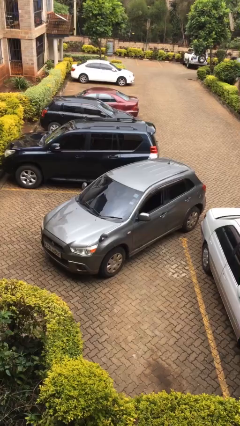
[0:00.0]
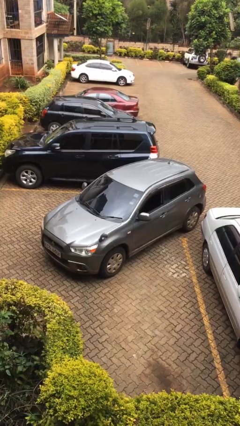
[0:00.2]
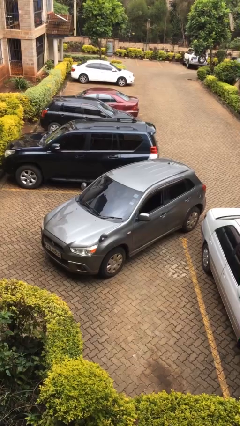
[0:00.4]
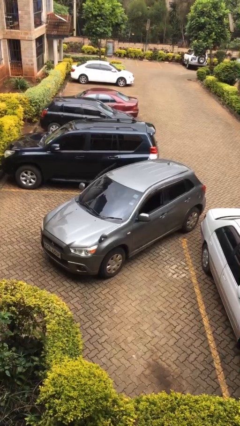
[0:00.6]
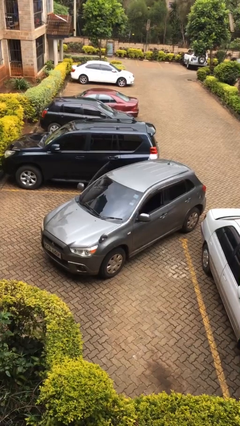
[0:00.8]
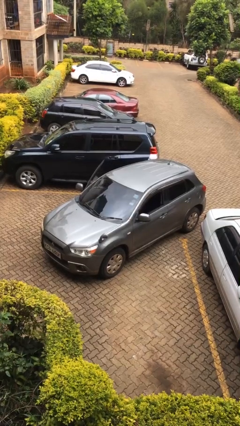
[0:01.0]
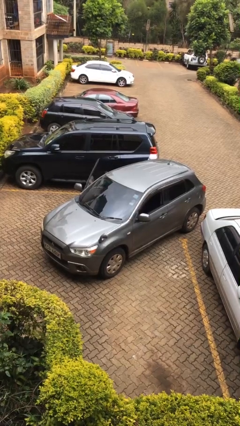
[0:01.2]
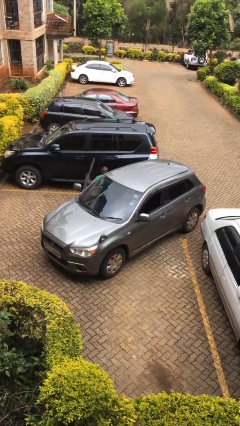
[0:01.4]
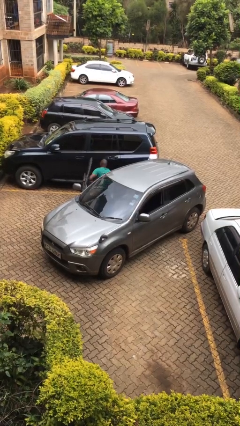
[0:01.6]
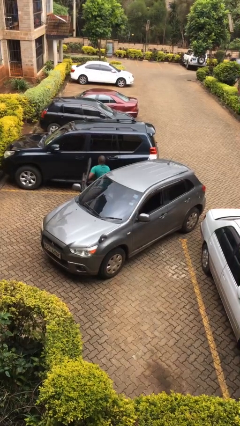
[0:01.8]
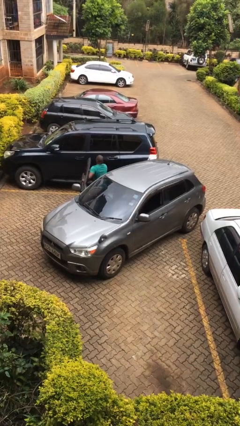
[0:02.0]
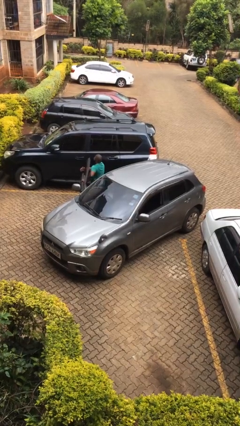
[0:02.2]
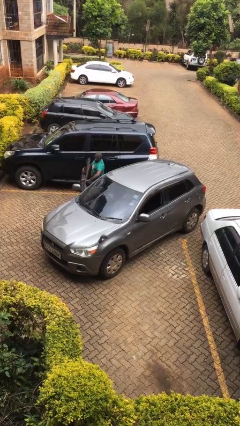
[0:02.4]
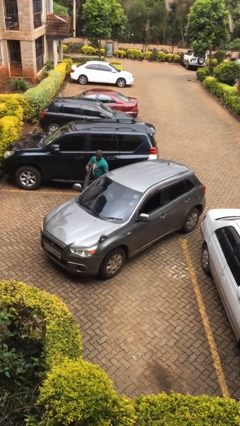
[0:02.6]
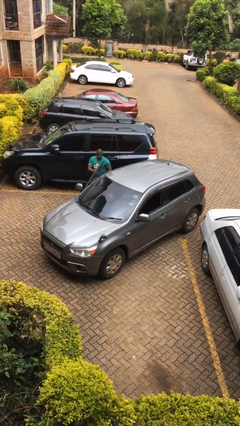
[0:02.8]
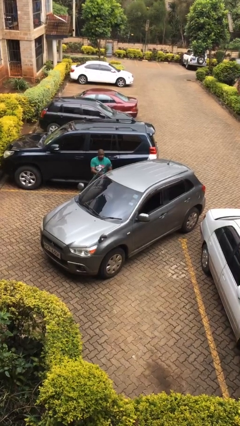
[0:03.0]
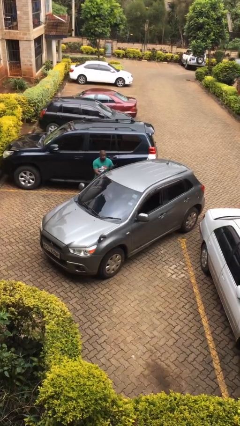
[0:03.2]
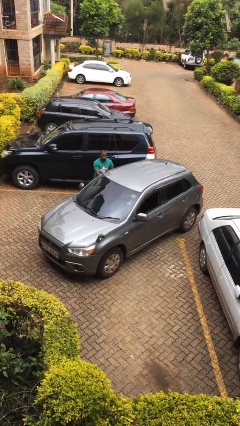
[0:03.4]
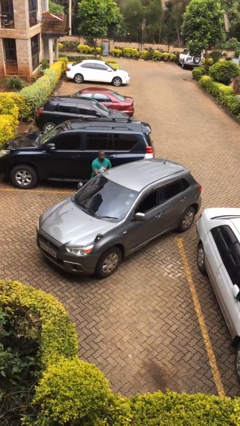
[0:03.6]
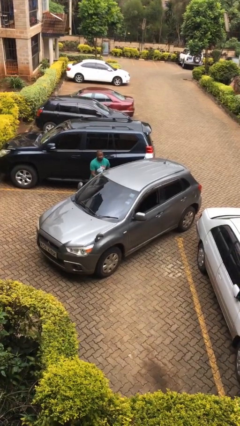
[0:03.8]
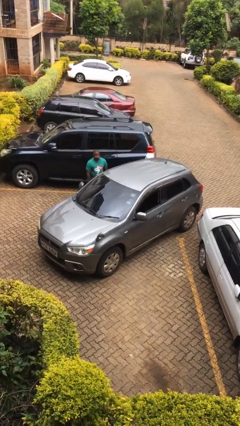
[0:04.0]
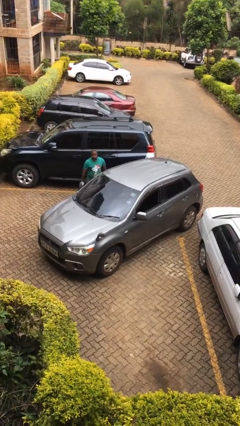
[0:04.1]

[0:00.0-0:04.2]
car drops off person

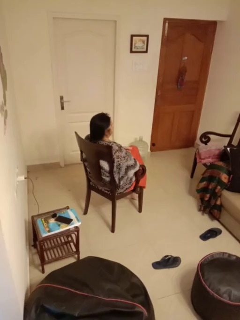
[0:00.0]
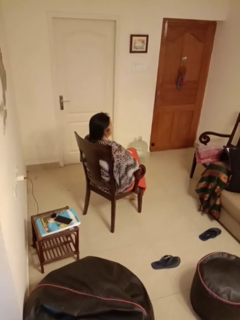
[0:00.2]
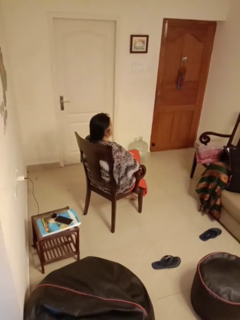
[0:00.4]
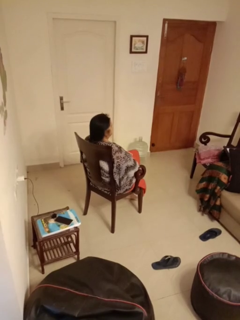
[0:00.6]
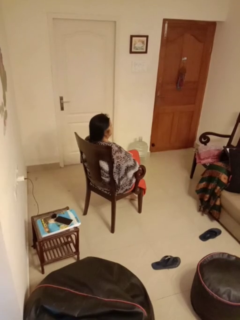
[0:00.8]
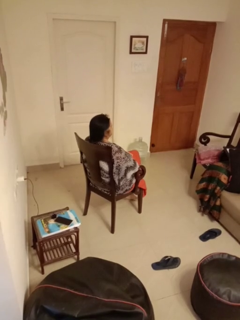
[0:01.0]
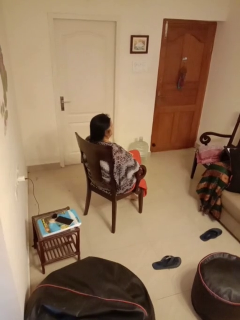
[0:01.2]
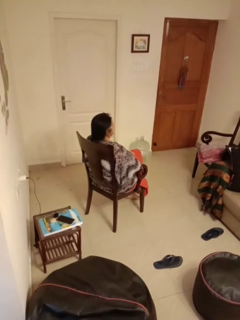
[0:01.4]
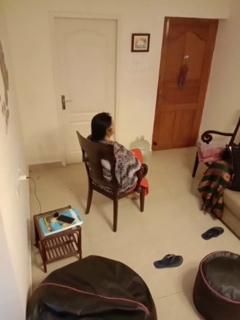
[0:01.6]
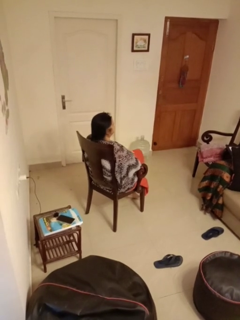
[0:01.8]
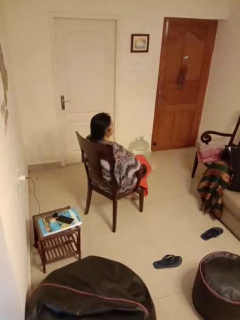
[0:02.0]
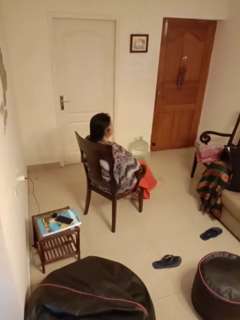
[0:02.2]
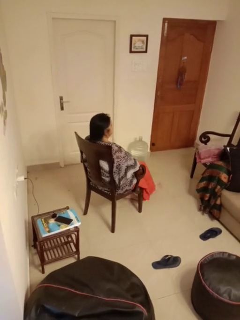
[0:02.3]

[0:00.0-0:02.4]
person crosses legs

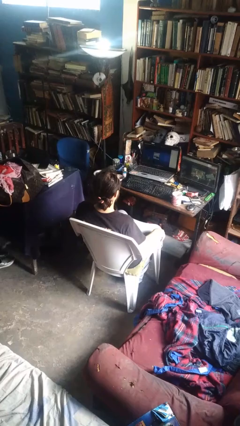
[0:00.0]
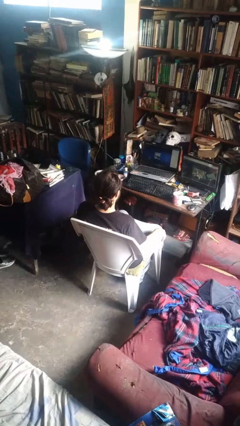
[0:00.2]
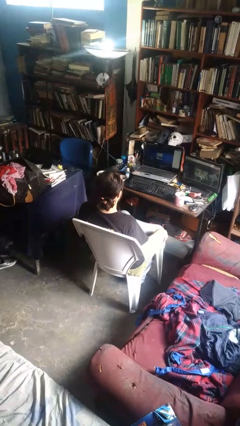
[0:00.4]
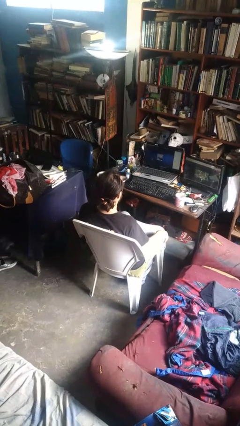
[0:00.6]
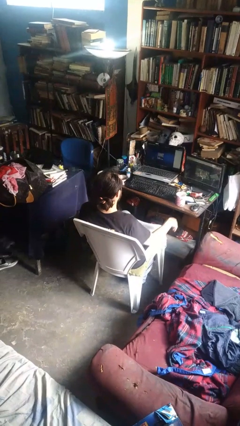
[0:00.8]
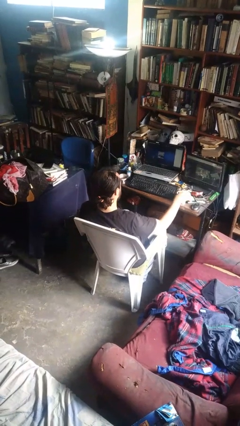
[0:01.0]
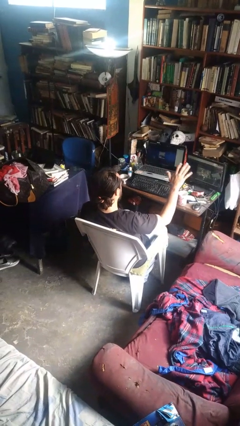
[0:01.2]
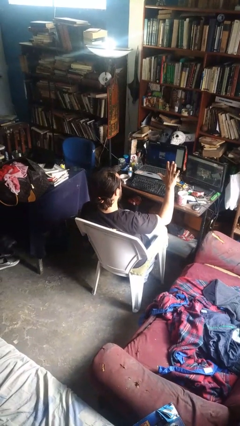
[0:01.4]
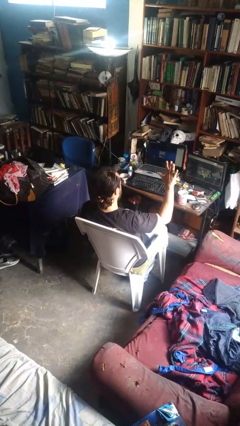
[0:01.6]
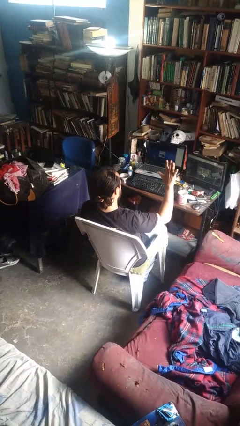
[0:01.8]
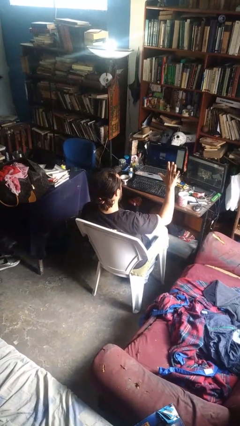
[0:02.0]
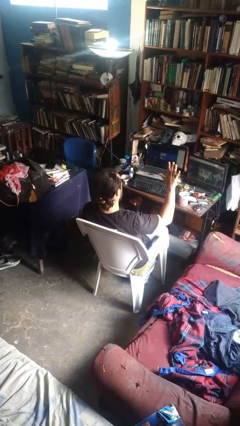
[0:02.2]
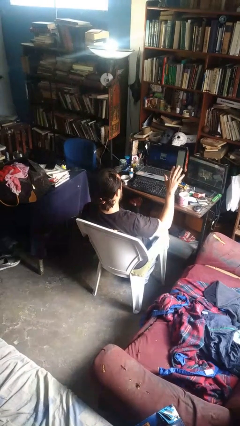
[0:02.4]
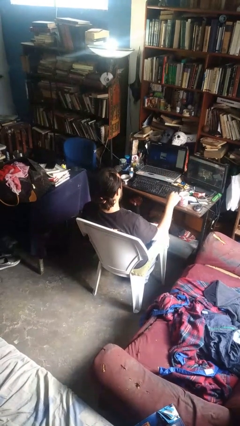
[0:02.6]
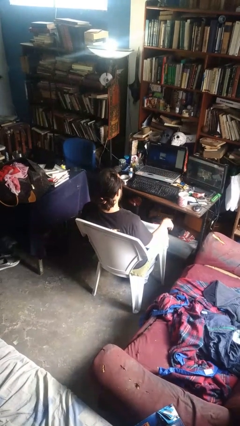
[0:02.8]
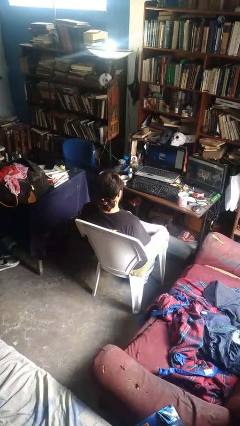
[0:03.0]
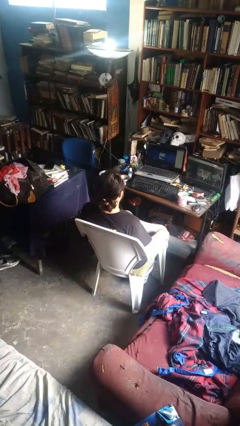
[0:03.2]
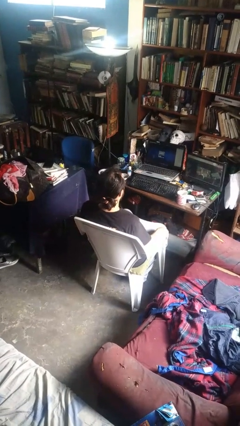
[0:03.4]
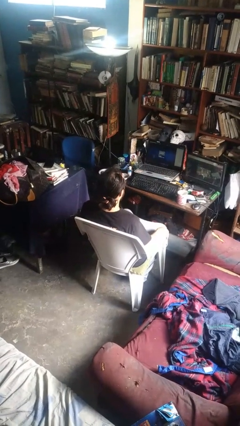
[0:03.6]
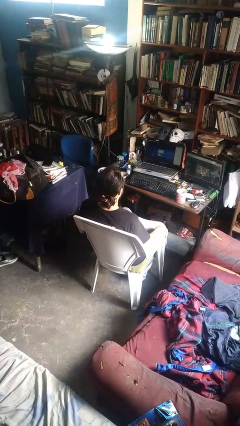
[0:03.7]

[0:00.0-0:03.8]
person gestures number five

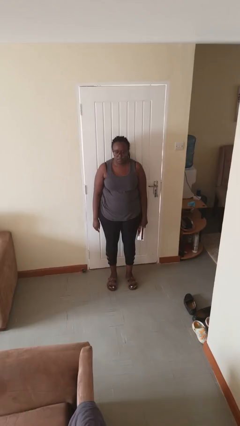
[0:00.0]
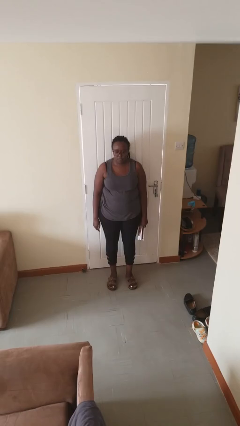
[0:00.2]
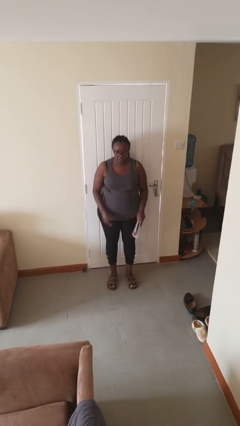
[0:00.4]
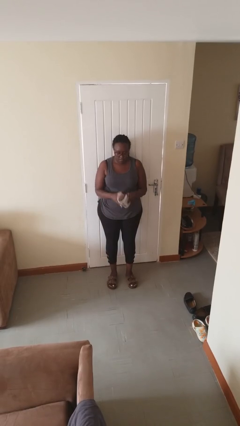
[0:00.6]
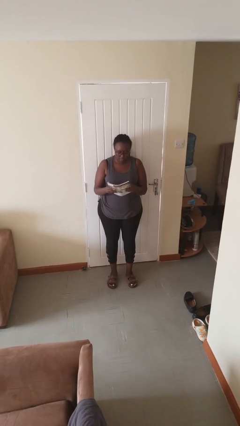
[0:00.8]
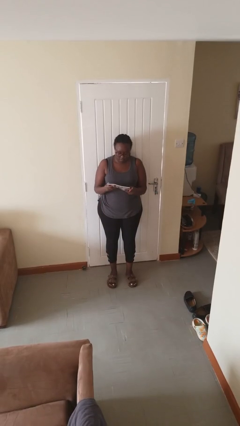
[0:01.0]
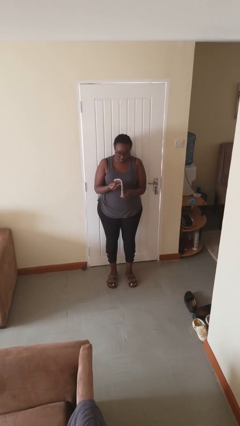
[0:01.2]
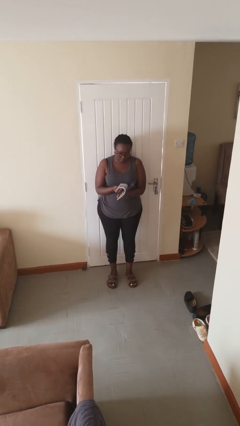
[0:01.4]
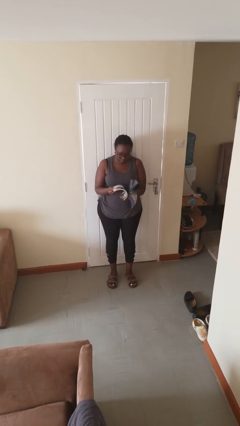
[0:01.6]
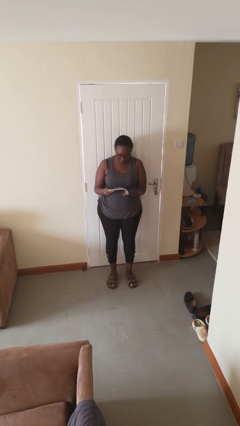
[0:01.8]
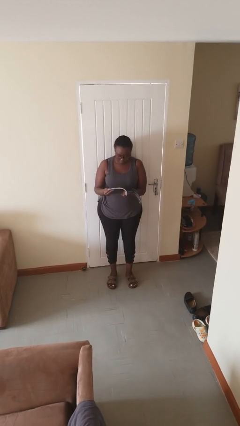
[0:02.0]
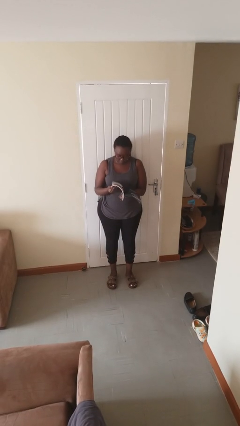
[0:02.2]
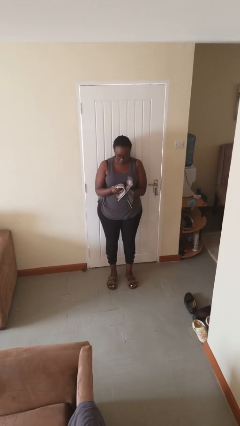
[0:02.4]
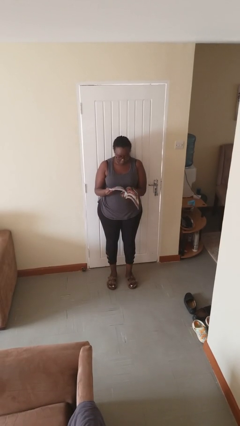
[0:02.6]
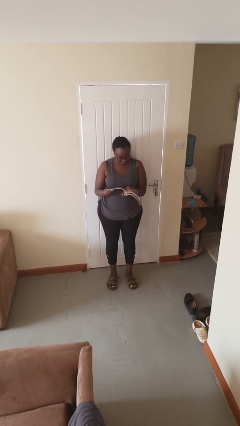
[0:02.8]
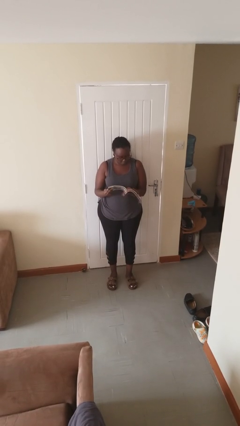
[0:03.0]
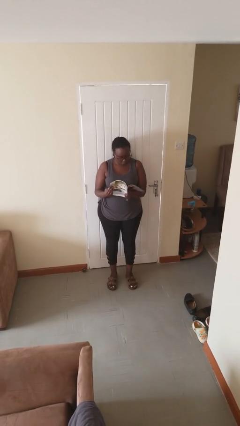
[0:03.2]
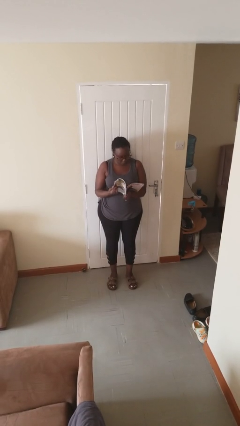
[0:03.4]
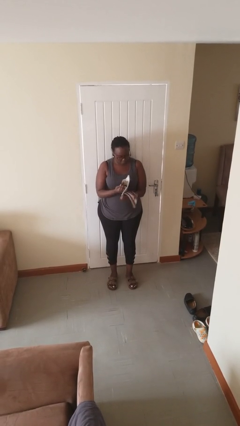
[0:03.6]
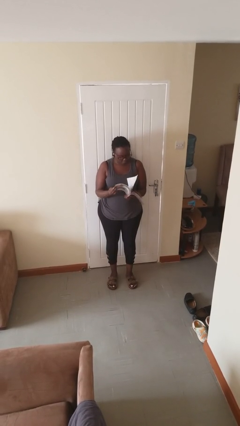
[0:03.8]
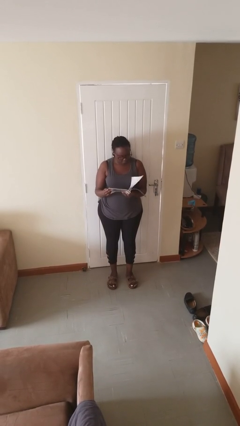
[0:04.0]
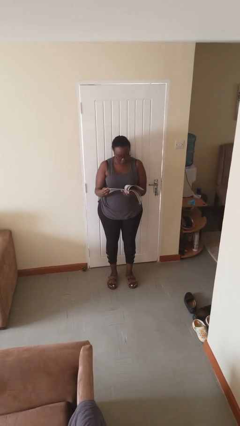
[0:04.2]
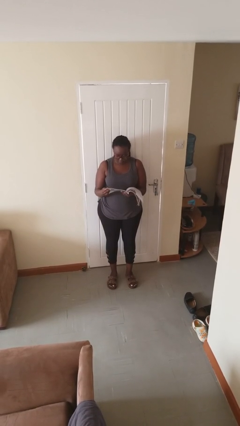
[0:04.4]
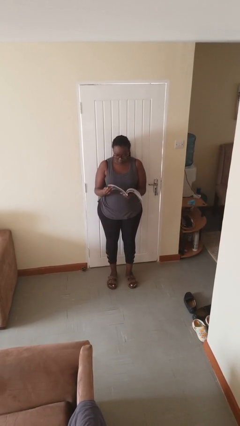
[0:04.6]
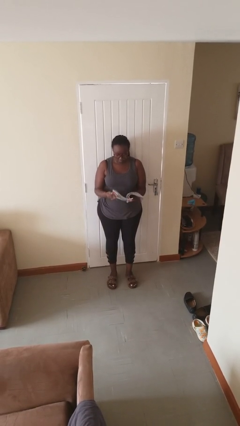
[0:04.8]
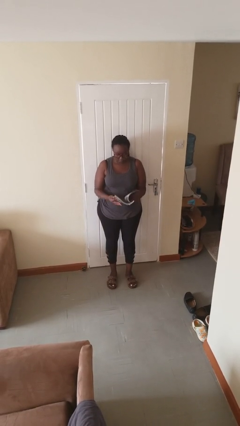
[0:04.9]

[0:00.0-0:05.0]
person reads magazine

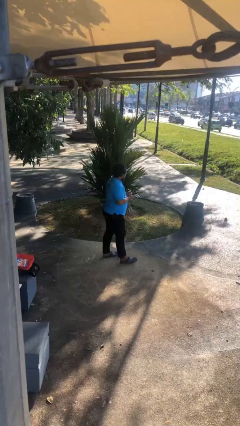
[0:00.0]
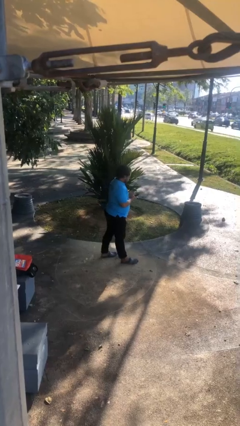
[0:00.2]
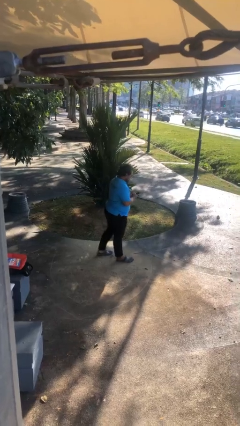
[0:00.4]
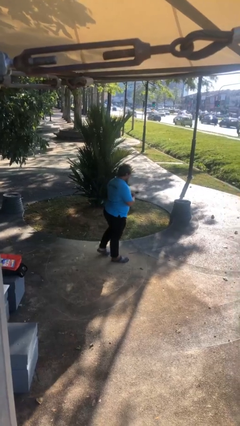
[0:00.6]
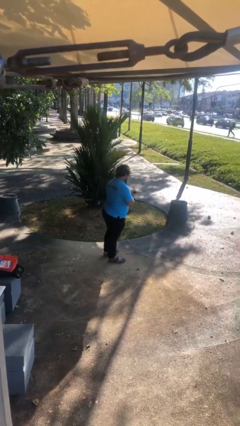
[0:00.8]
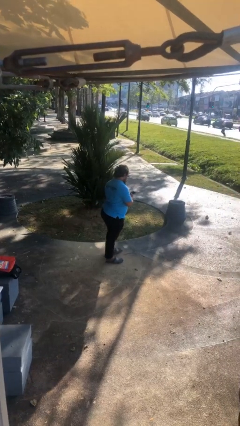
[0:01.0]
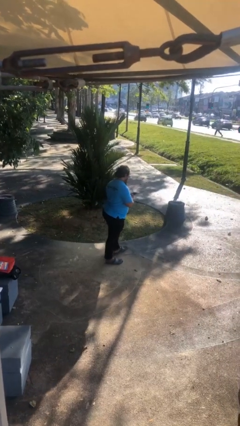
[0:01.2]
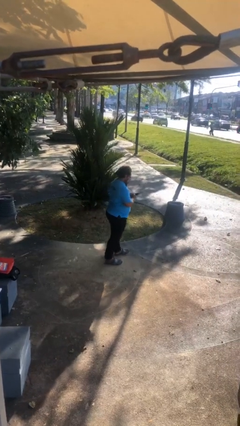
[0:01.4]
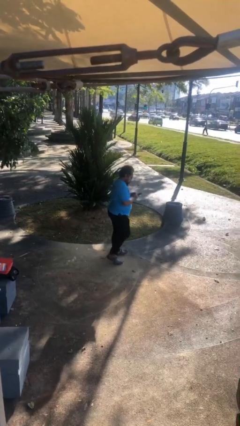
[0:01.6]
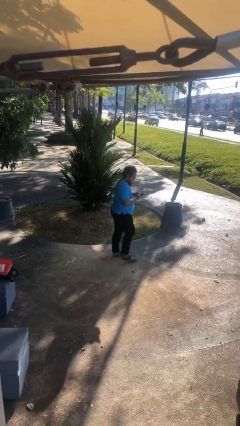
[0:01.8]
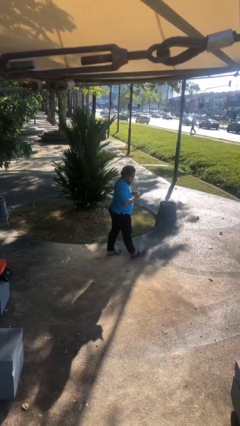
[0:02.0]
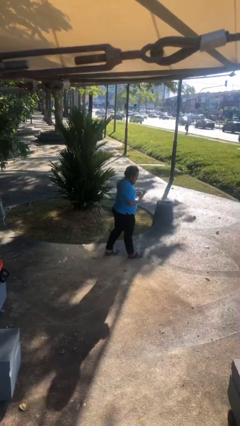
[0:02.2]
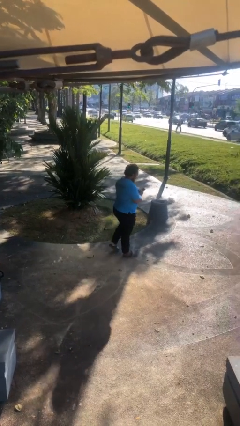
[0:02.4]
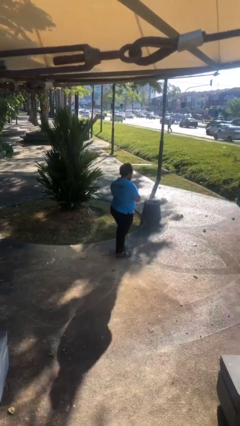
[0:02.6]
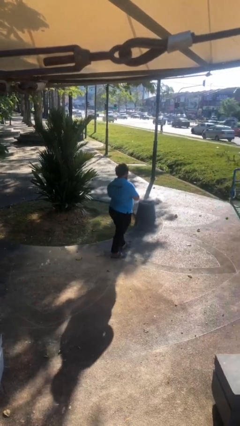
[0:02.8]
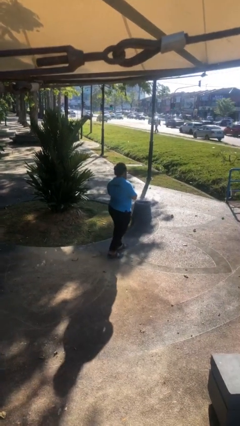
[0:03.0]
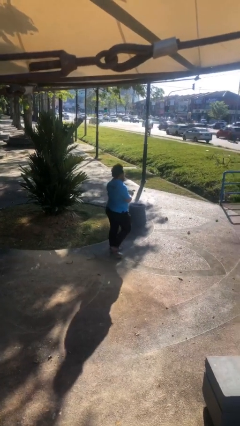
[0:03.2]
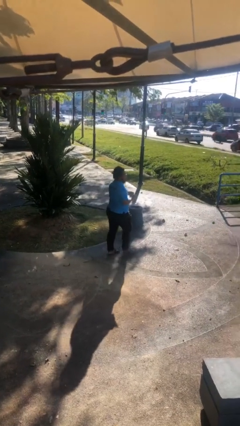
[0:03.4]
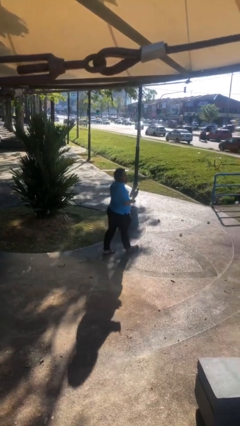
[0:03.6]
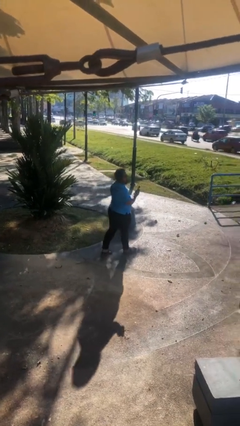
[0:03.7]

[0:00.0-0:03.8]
person texts on phone
